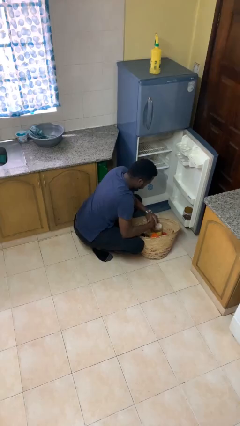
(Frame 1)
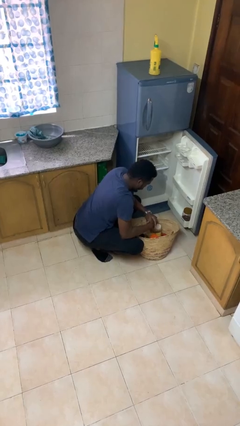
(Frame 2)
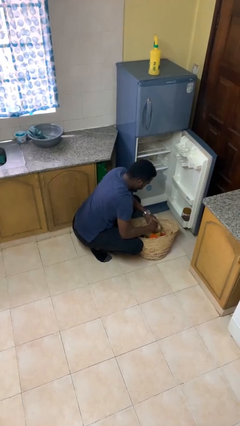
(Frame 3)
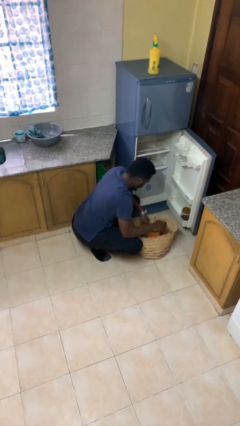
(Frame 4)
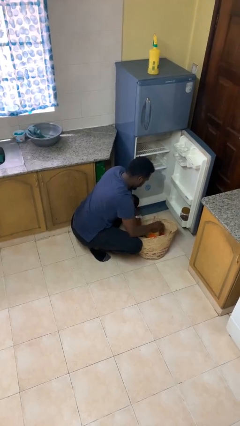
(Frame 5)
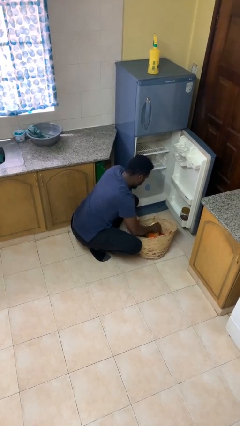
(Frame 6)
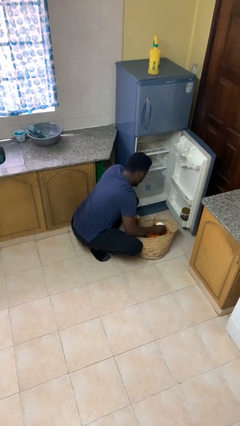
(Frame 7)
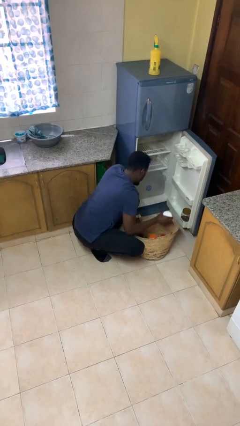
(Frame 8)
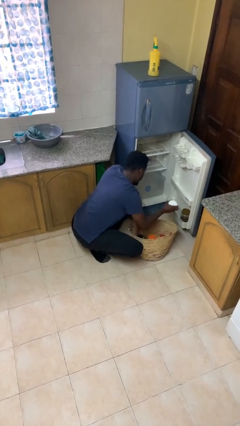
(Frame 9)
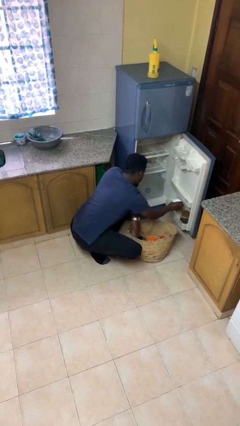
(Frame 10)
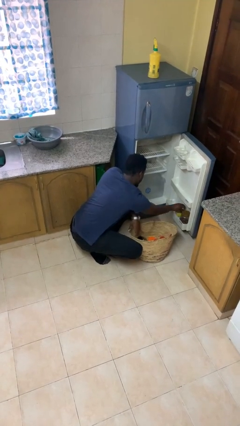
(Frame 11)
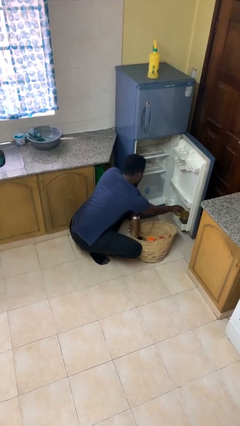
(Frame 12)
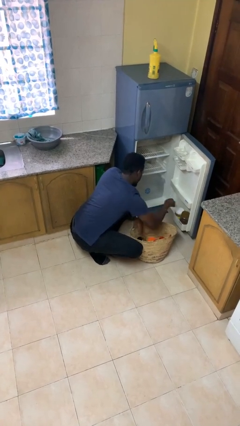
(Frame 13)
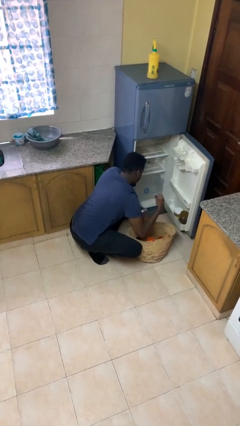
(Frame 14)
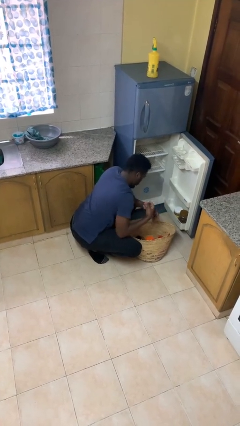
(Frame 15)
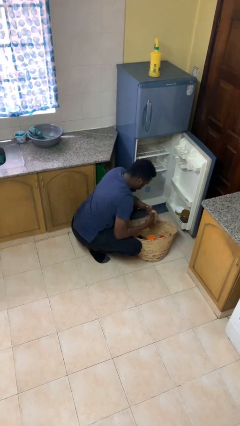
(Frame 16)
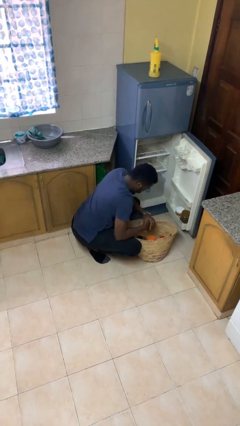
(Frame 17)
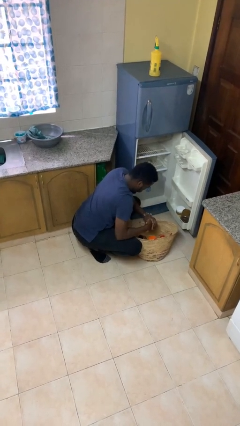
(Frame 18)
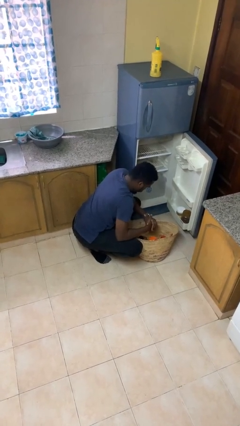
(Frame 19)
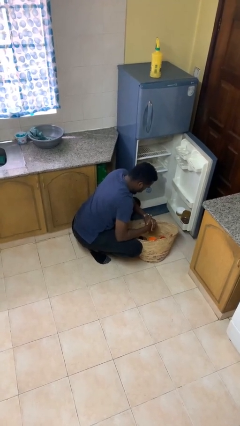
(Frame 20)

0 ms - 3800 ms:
person loads groceries into refrigerator

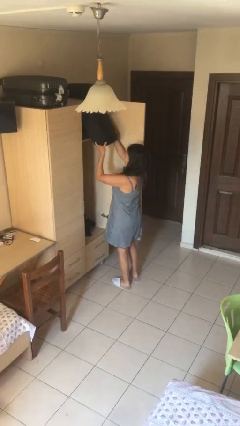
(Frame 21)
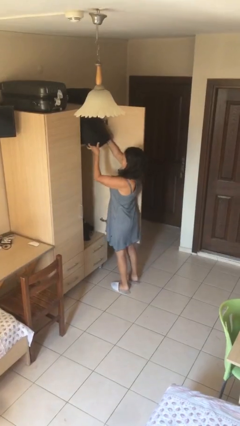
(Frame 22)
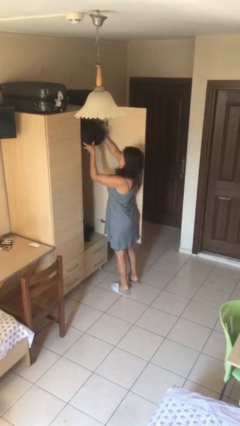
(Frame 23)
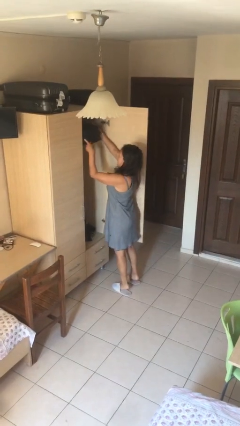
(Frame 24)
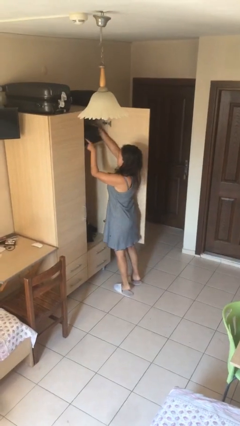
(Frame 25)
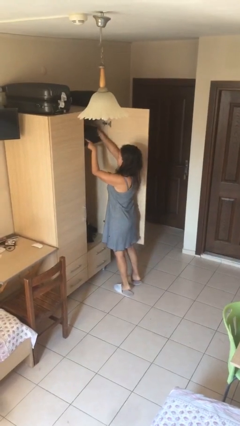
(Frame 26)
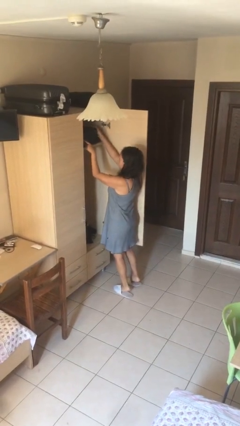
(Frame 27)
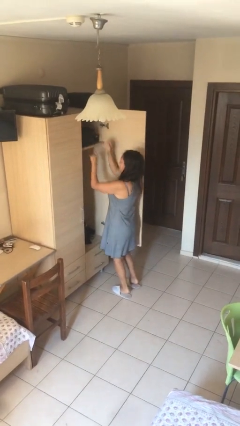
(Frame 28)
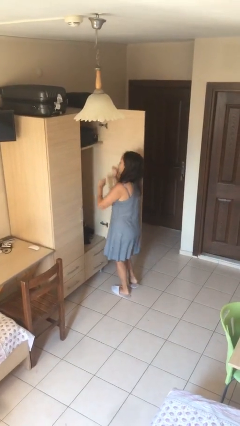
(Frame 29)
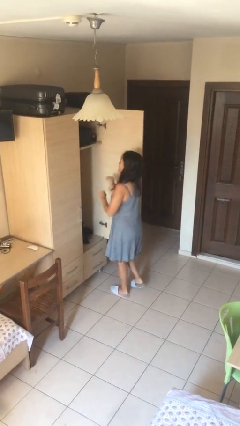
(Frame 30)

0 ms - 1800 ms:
person puts down object on shelf

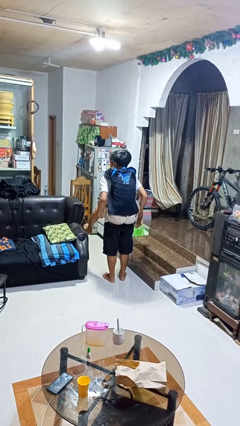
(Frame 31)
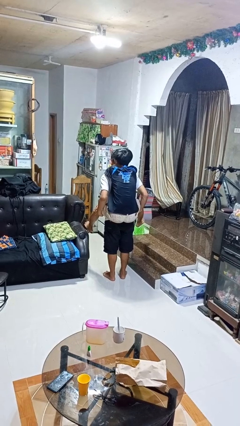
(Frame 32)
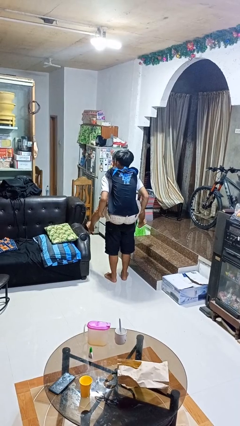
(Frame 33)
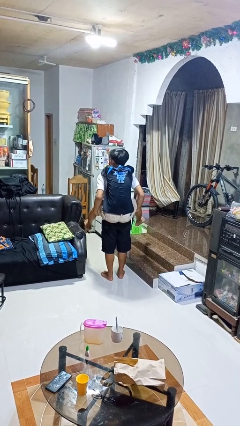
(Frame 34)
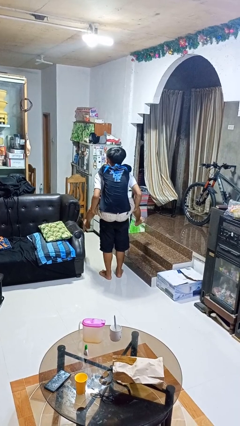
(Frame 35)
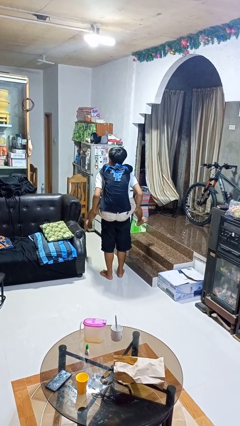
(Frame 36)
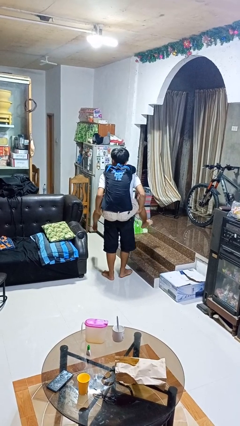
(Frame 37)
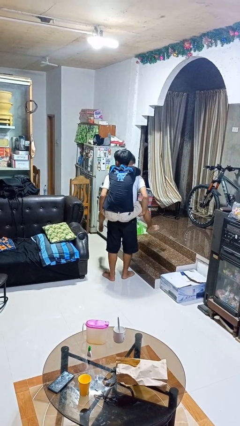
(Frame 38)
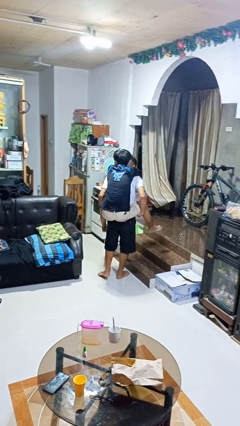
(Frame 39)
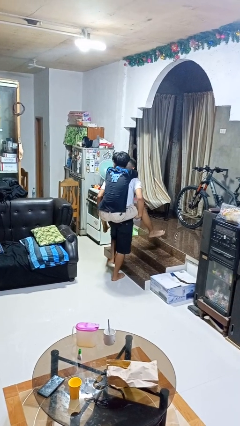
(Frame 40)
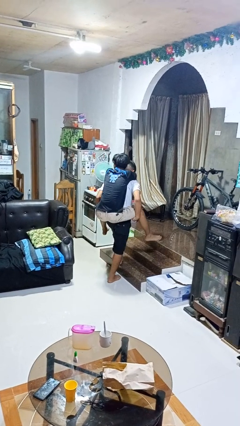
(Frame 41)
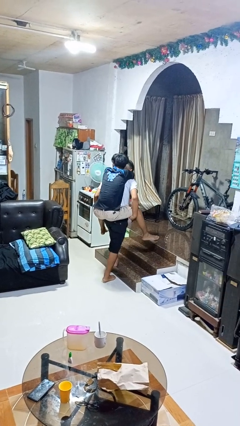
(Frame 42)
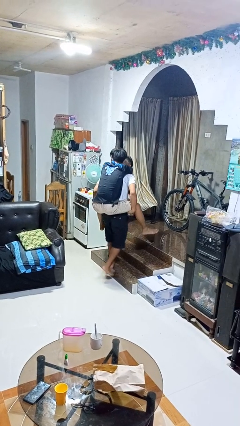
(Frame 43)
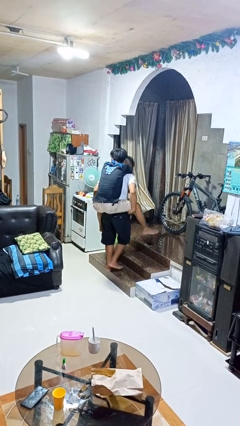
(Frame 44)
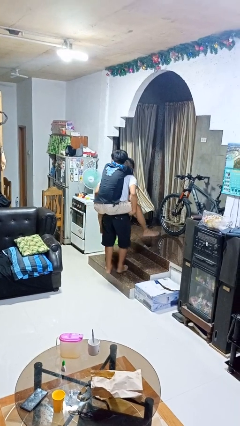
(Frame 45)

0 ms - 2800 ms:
person carries person on back

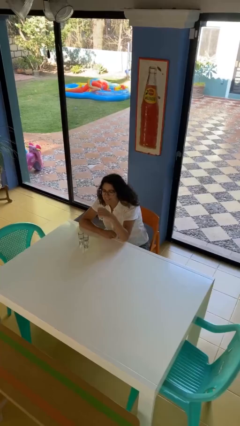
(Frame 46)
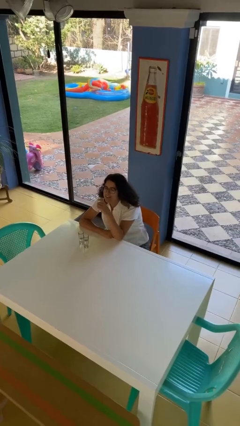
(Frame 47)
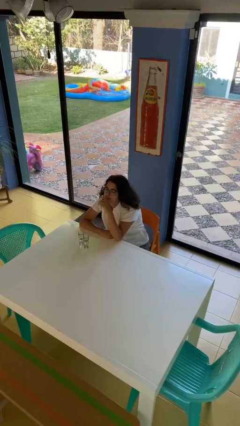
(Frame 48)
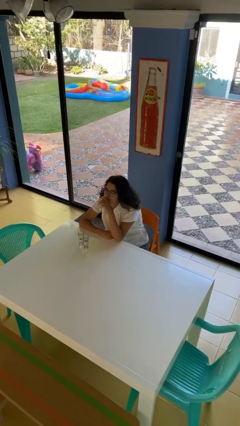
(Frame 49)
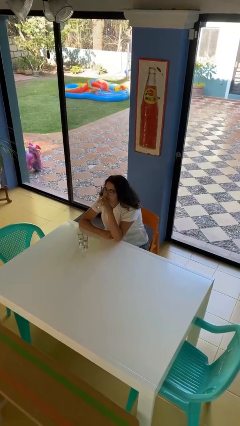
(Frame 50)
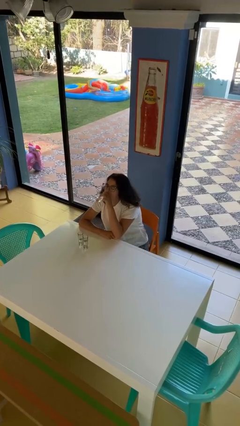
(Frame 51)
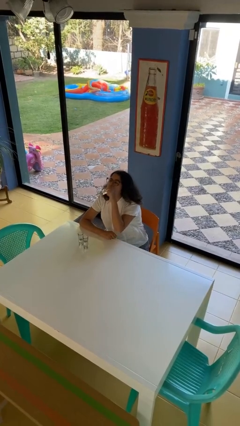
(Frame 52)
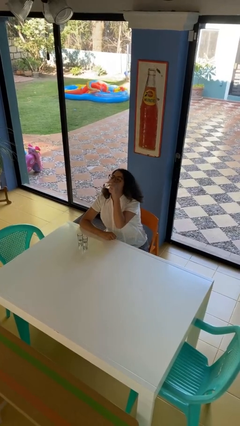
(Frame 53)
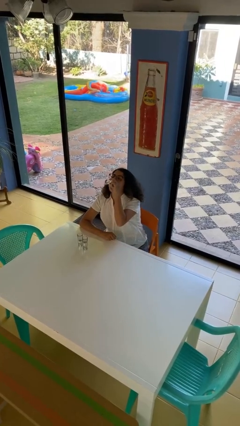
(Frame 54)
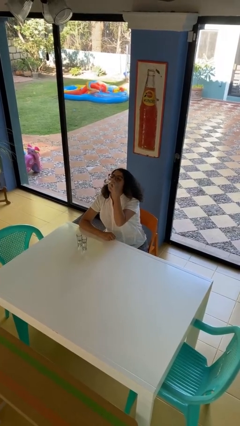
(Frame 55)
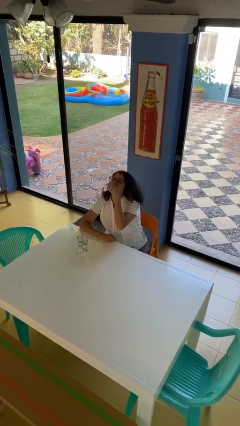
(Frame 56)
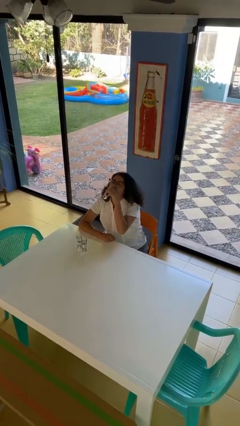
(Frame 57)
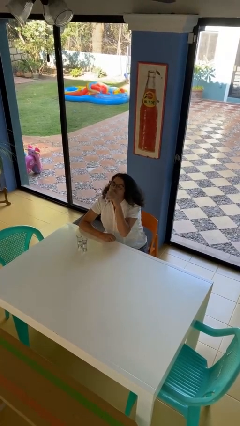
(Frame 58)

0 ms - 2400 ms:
person drinks from shotglass

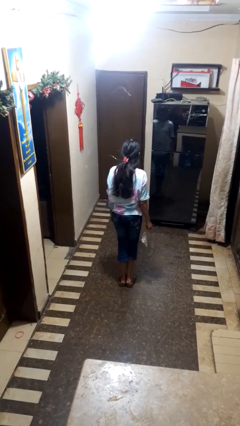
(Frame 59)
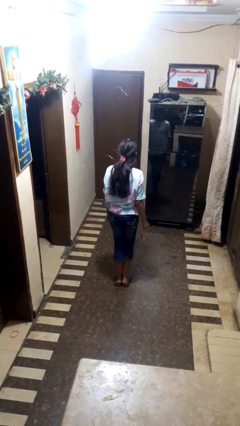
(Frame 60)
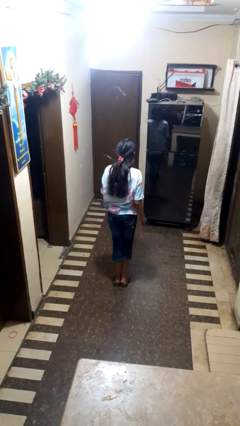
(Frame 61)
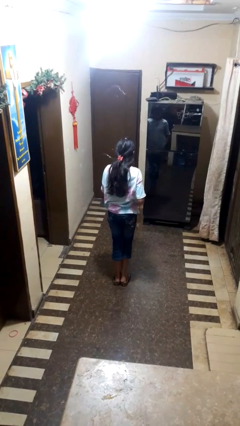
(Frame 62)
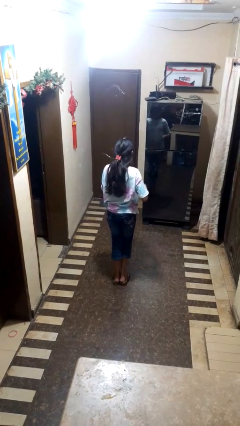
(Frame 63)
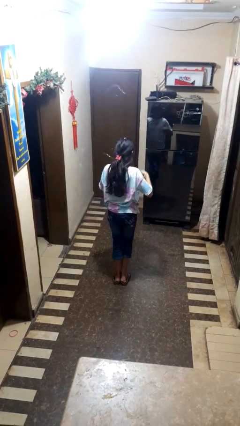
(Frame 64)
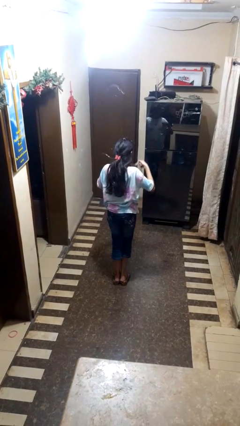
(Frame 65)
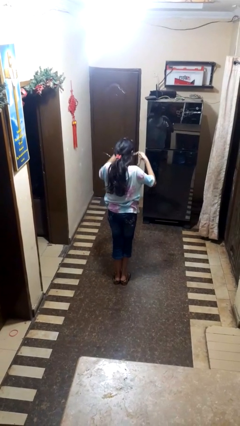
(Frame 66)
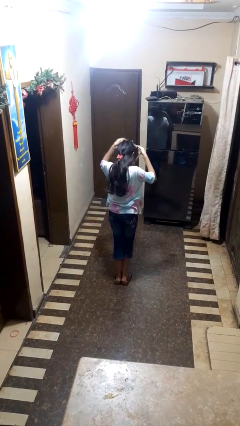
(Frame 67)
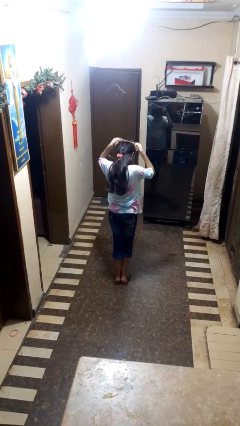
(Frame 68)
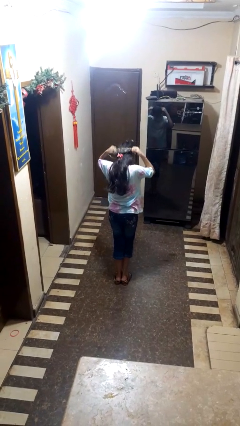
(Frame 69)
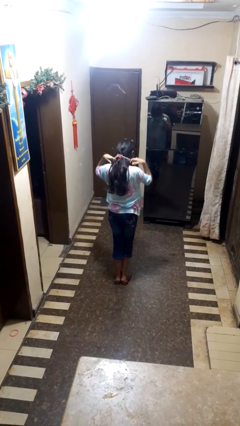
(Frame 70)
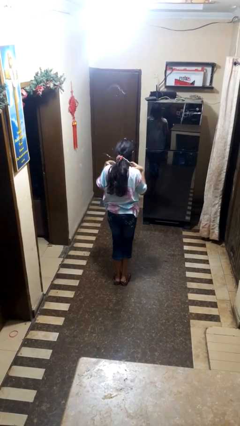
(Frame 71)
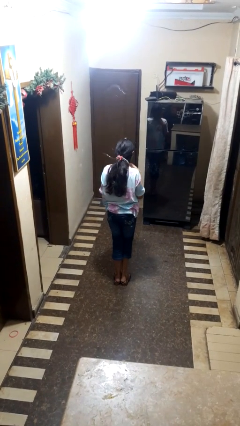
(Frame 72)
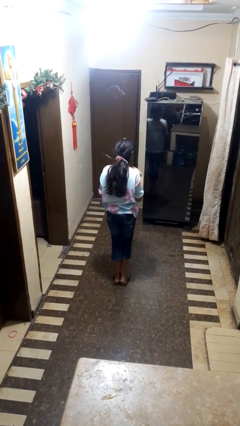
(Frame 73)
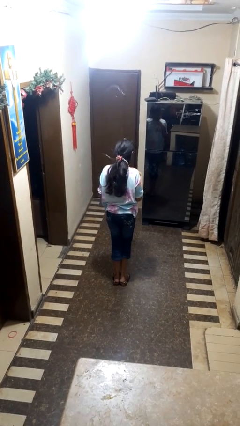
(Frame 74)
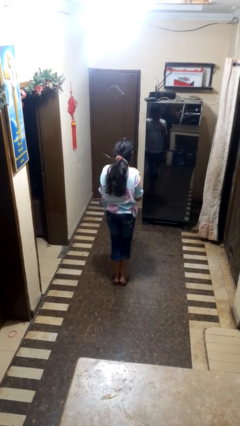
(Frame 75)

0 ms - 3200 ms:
person puts on necklace

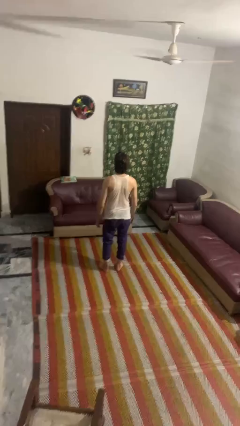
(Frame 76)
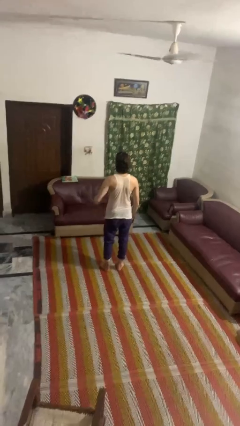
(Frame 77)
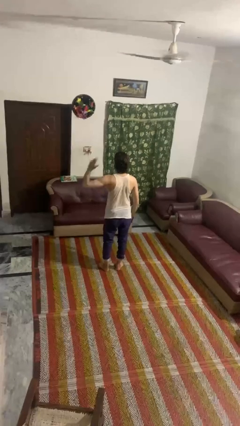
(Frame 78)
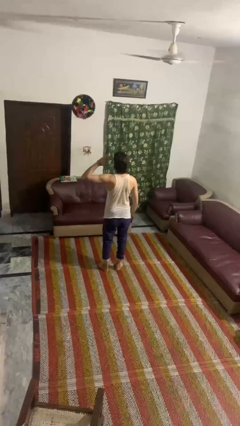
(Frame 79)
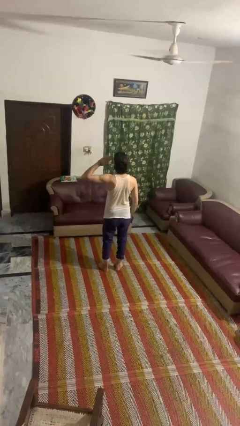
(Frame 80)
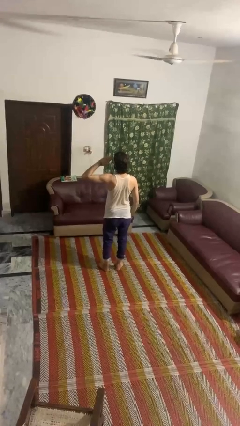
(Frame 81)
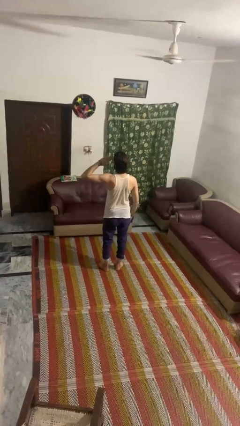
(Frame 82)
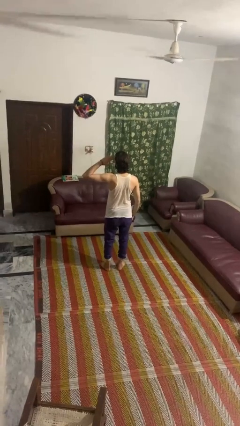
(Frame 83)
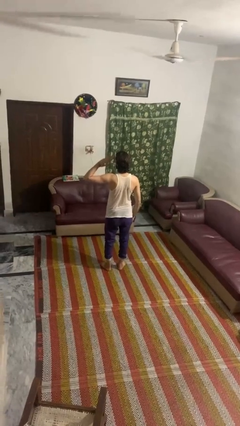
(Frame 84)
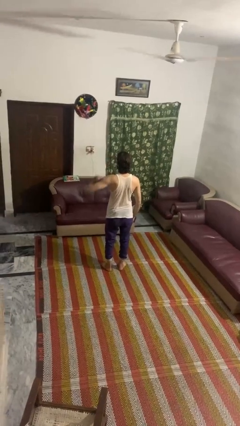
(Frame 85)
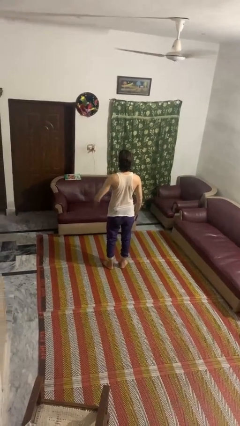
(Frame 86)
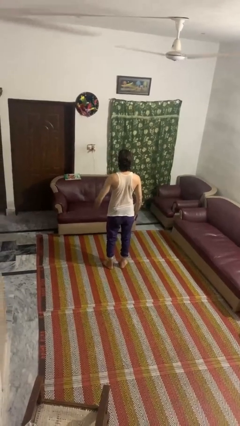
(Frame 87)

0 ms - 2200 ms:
person salutes

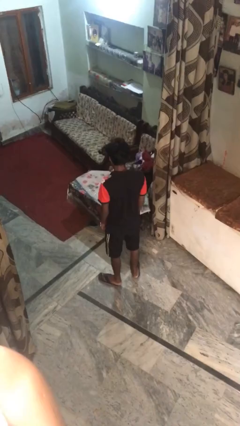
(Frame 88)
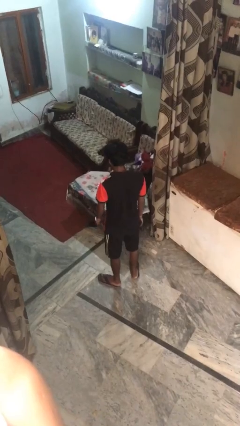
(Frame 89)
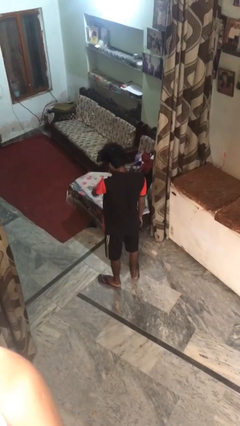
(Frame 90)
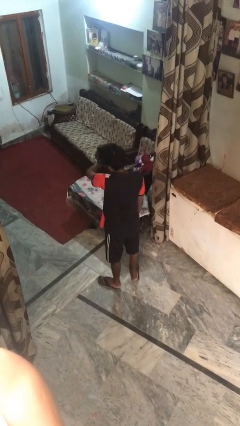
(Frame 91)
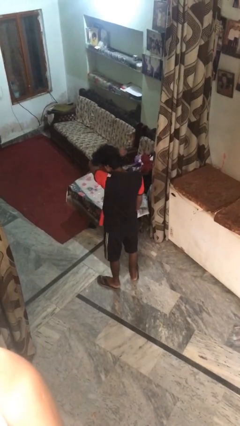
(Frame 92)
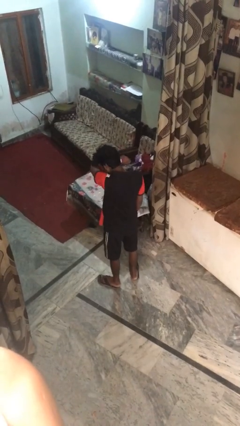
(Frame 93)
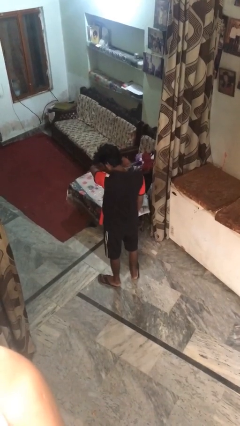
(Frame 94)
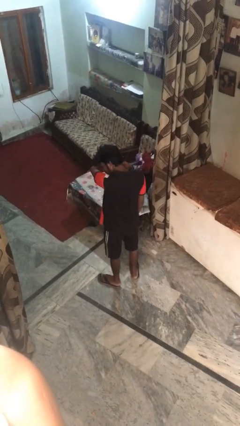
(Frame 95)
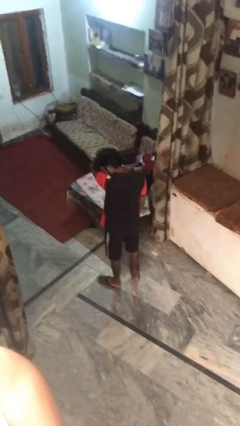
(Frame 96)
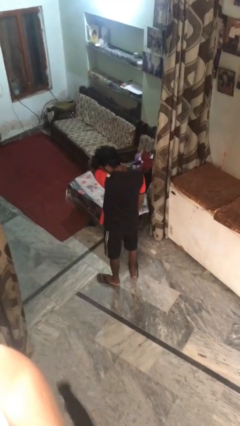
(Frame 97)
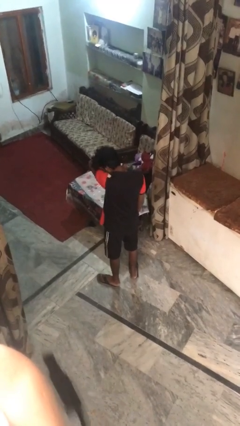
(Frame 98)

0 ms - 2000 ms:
person sneezes into arm
